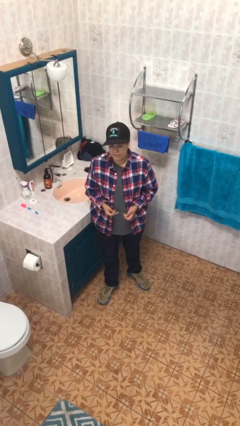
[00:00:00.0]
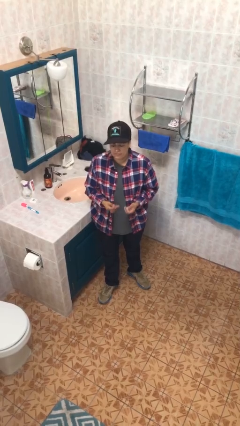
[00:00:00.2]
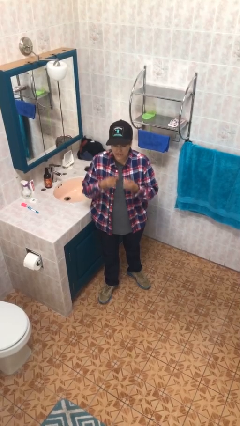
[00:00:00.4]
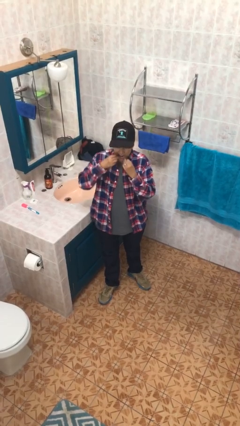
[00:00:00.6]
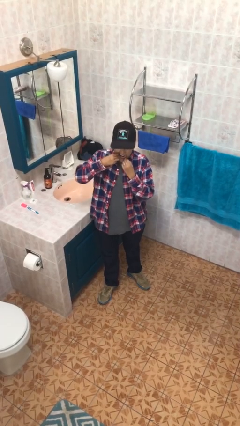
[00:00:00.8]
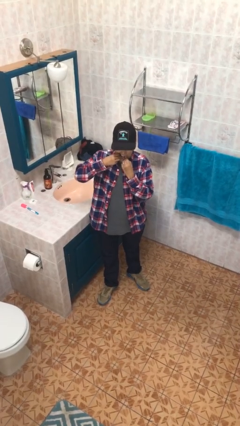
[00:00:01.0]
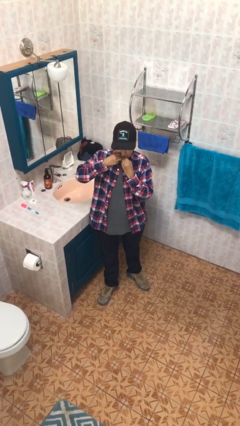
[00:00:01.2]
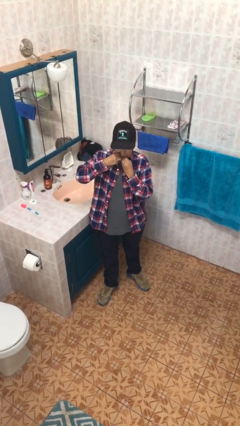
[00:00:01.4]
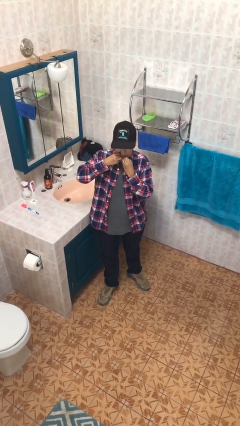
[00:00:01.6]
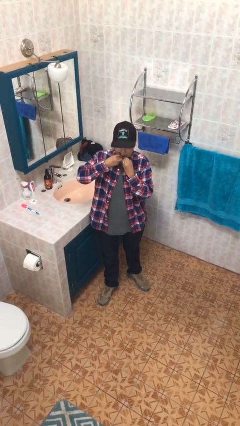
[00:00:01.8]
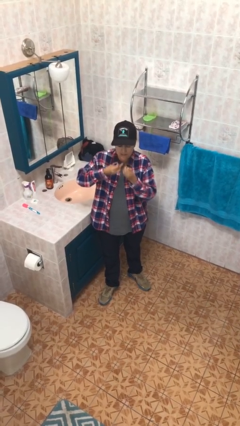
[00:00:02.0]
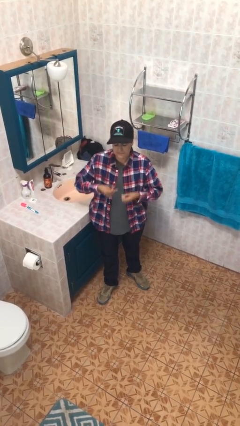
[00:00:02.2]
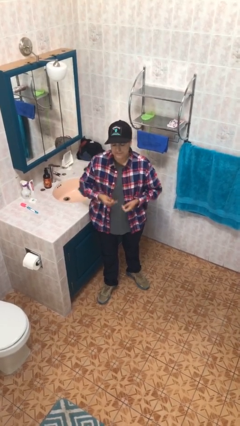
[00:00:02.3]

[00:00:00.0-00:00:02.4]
person flosses

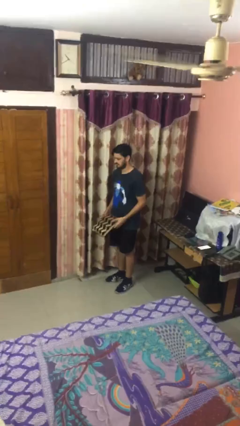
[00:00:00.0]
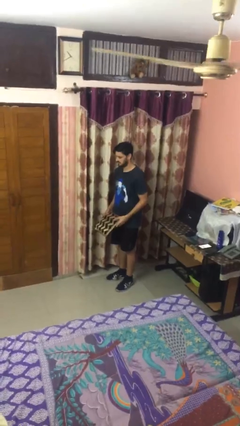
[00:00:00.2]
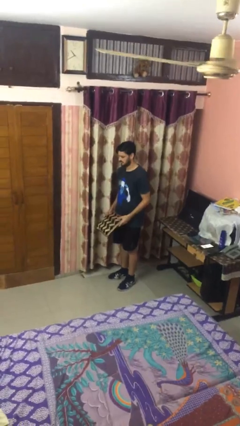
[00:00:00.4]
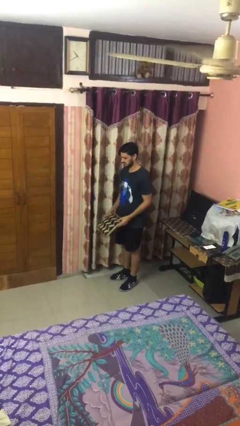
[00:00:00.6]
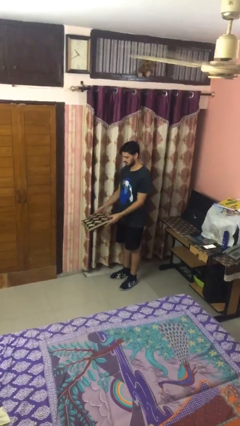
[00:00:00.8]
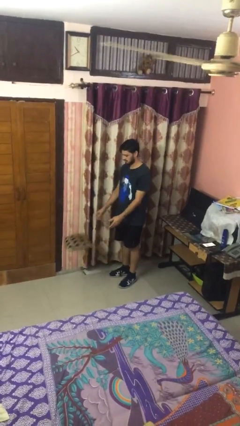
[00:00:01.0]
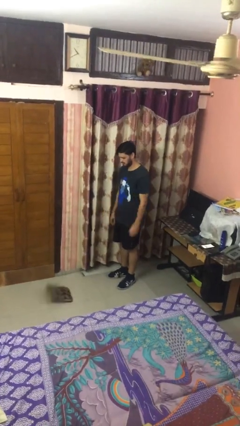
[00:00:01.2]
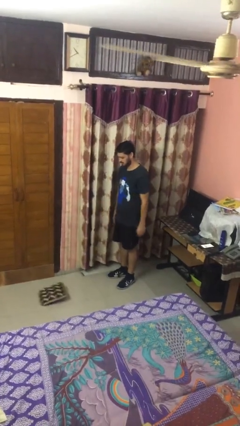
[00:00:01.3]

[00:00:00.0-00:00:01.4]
person throws object to ground

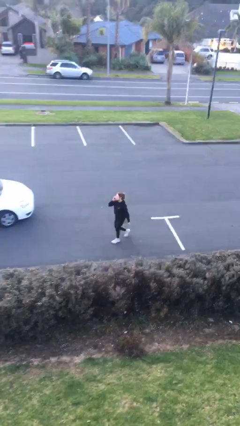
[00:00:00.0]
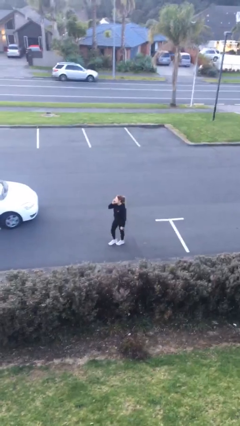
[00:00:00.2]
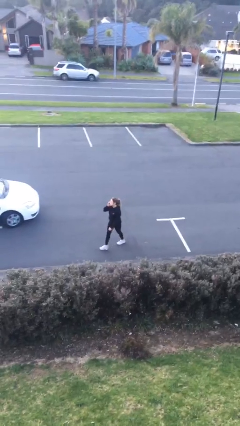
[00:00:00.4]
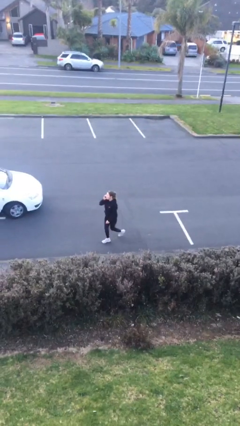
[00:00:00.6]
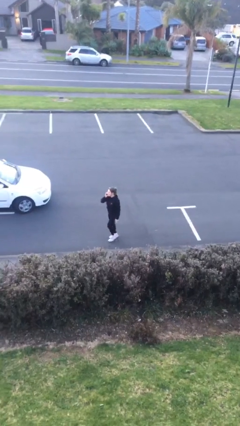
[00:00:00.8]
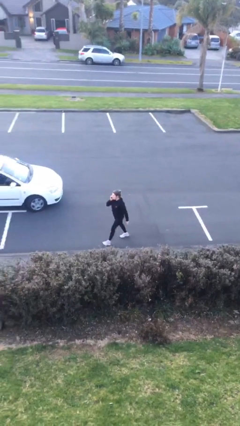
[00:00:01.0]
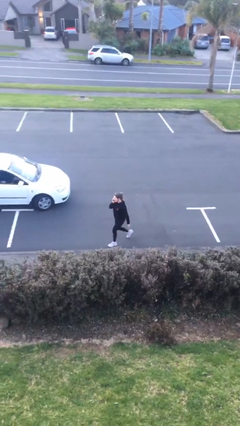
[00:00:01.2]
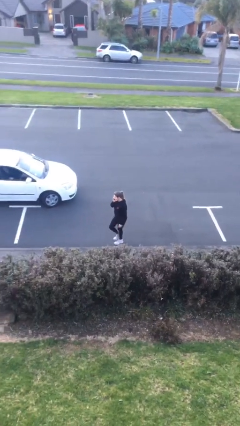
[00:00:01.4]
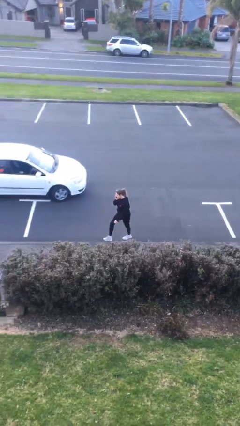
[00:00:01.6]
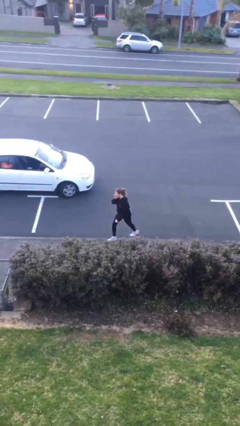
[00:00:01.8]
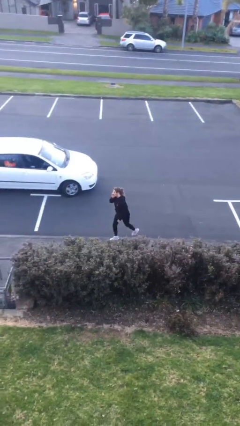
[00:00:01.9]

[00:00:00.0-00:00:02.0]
person talks on phone

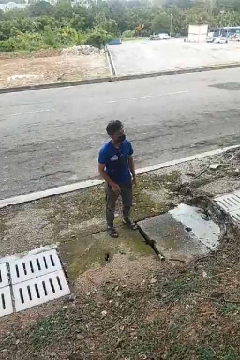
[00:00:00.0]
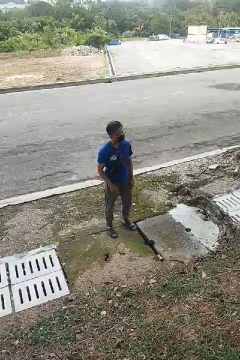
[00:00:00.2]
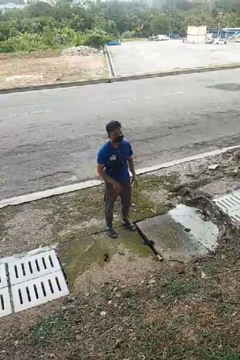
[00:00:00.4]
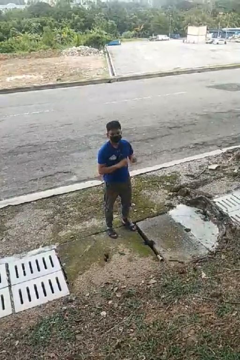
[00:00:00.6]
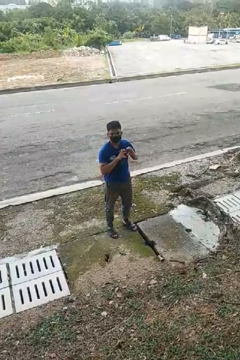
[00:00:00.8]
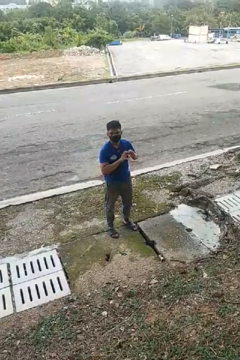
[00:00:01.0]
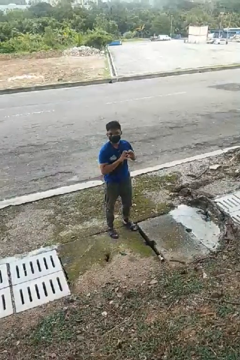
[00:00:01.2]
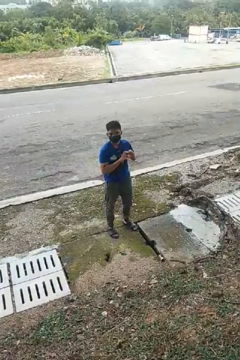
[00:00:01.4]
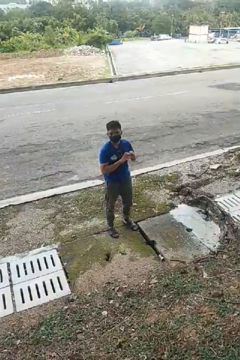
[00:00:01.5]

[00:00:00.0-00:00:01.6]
person gestures heart

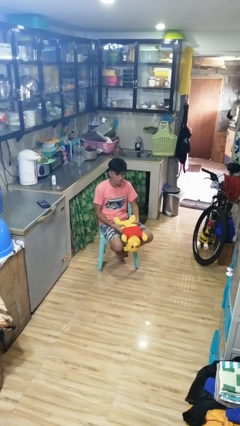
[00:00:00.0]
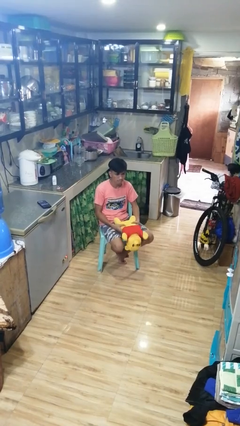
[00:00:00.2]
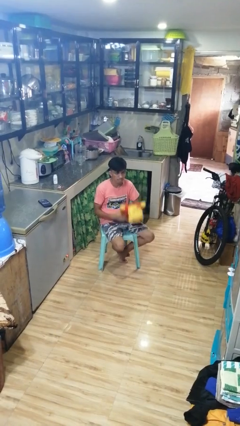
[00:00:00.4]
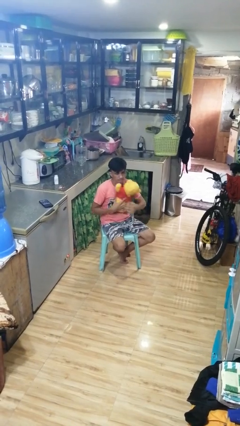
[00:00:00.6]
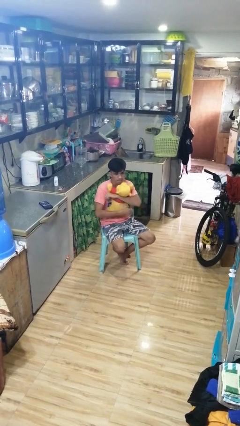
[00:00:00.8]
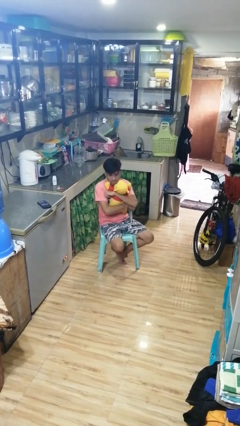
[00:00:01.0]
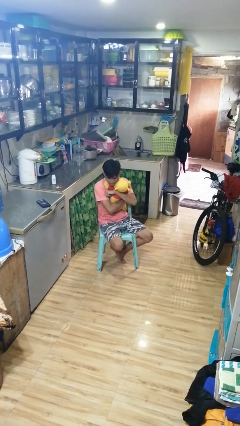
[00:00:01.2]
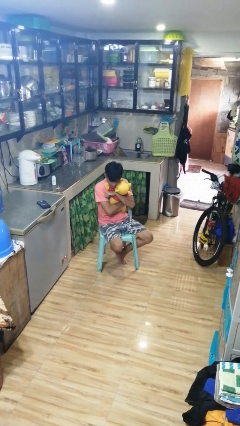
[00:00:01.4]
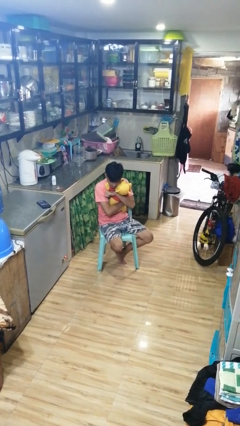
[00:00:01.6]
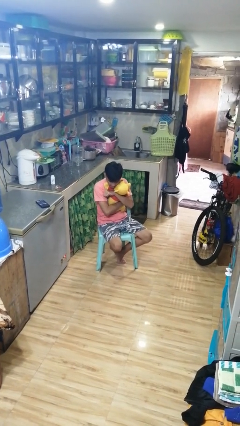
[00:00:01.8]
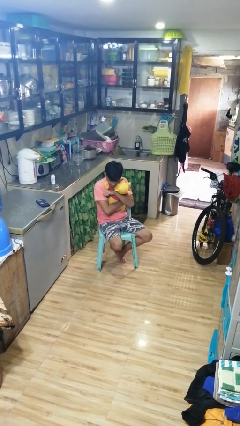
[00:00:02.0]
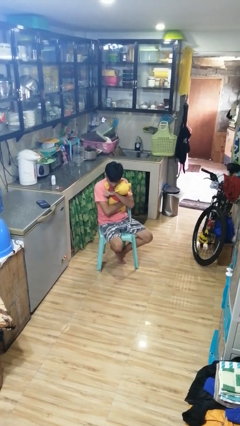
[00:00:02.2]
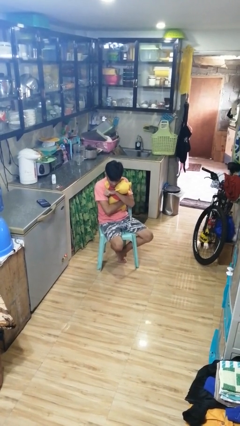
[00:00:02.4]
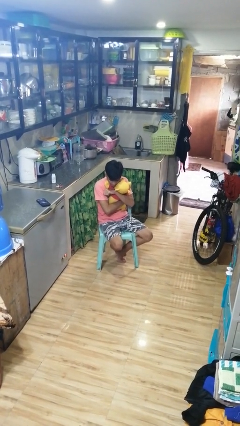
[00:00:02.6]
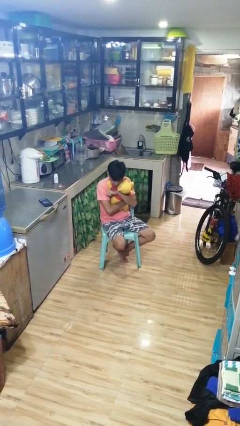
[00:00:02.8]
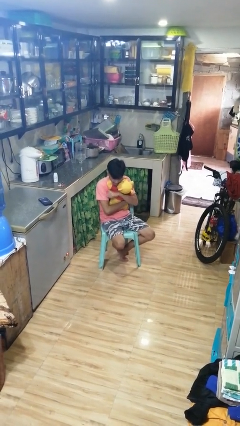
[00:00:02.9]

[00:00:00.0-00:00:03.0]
person hugs stuffed animal

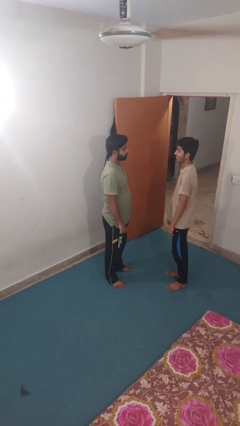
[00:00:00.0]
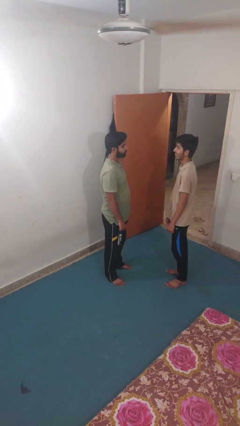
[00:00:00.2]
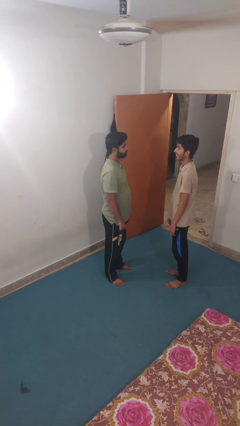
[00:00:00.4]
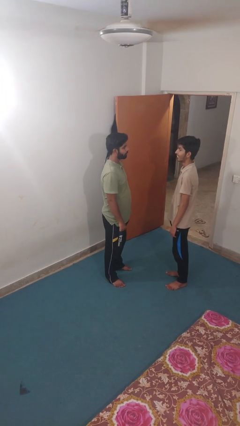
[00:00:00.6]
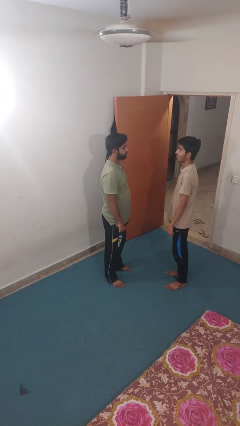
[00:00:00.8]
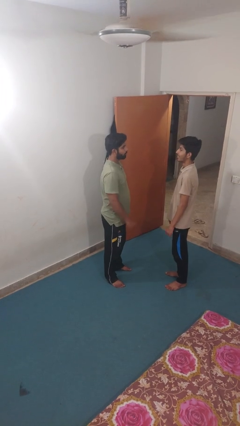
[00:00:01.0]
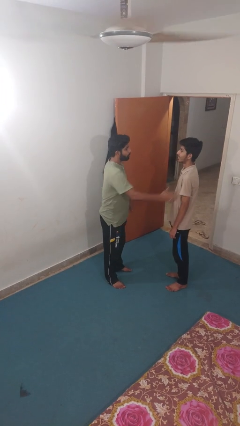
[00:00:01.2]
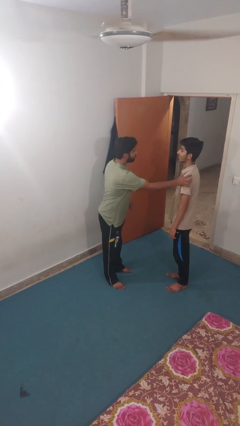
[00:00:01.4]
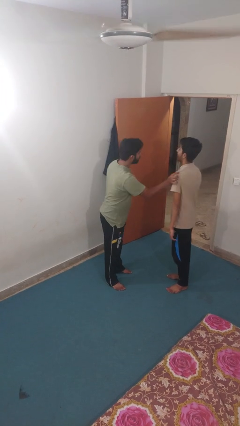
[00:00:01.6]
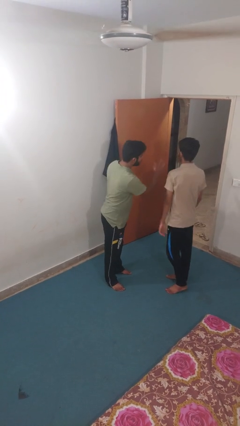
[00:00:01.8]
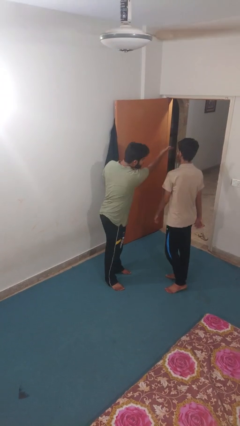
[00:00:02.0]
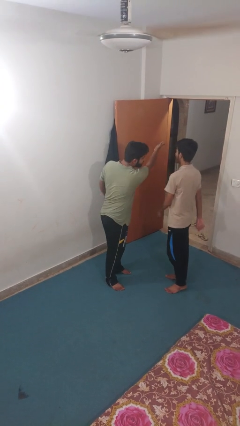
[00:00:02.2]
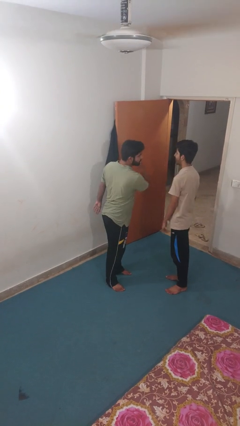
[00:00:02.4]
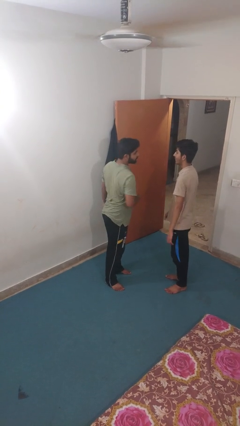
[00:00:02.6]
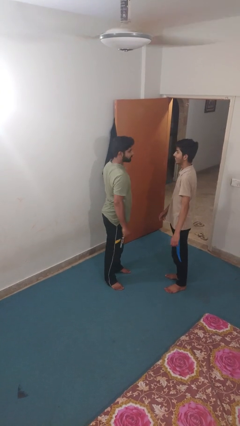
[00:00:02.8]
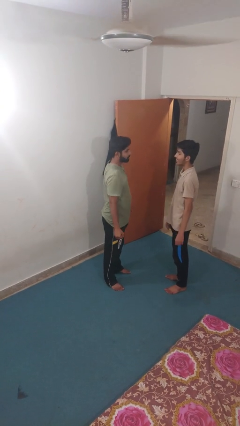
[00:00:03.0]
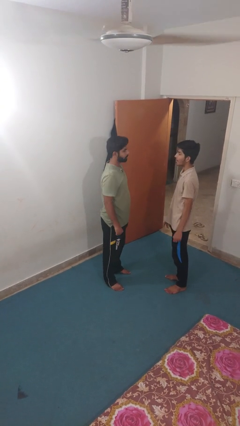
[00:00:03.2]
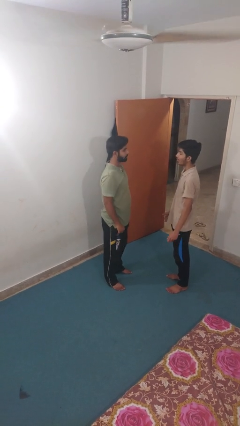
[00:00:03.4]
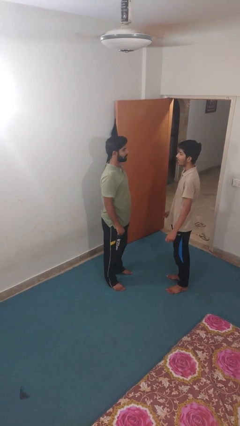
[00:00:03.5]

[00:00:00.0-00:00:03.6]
person shoves person

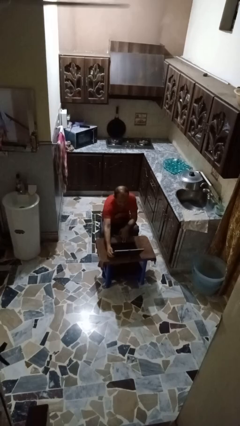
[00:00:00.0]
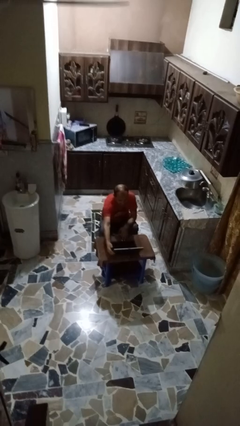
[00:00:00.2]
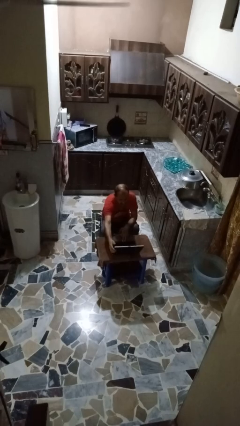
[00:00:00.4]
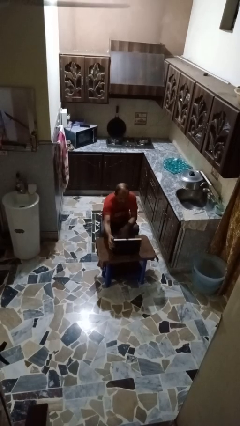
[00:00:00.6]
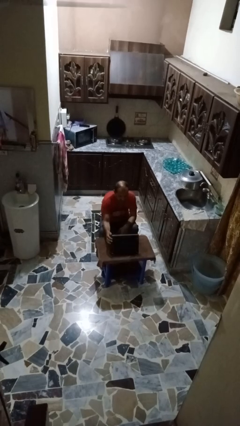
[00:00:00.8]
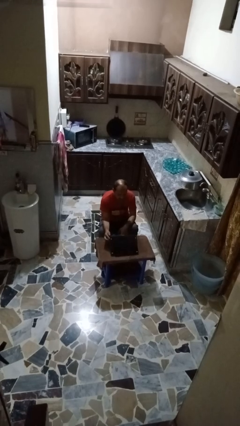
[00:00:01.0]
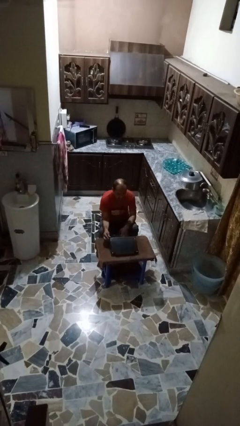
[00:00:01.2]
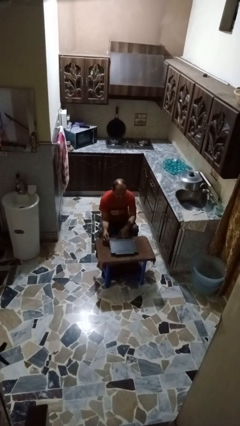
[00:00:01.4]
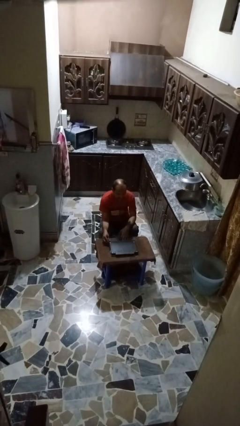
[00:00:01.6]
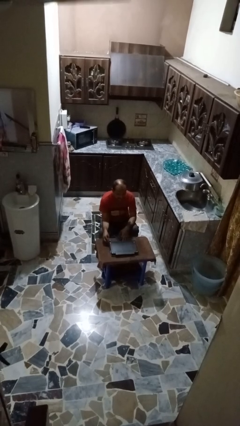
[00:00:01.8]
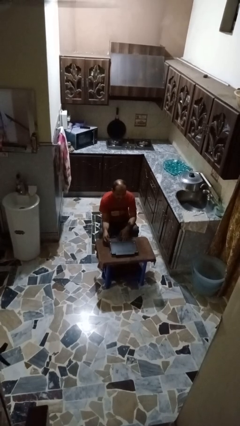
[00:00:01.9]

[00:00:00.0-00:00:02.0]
person closes laptop

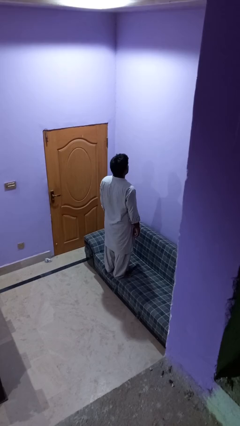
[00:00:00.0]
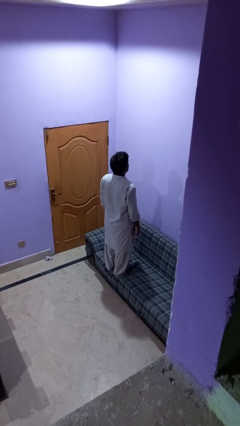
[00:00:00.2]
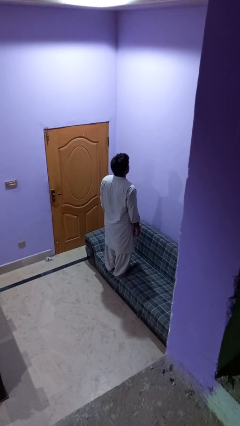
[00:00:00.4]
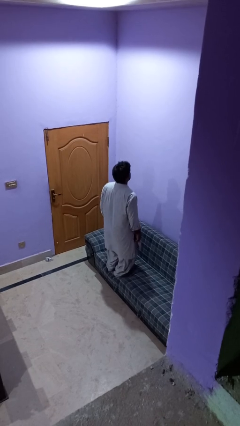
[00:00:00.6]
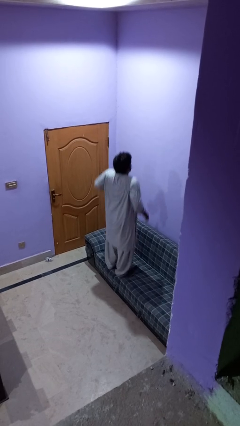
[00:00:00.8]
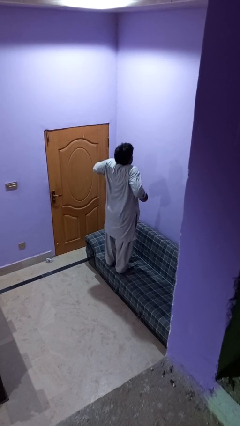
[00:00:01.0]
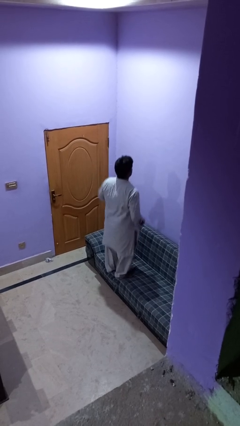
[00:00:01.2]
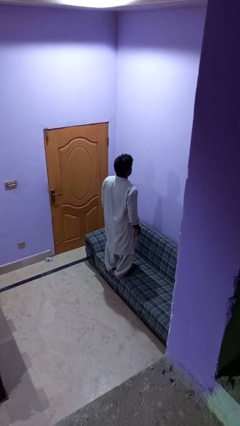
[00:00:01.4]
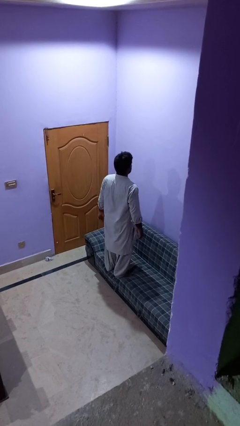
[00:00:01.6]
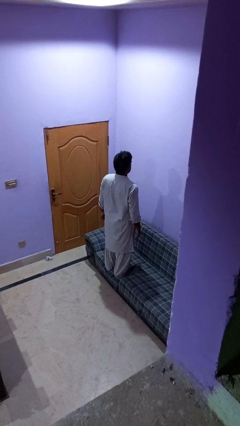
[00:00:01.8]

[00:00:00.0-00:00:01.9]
person jumps on couch
